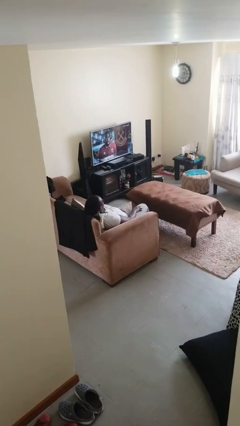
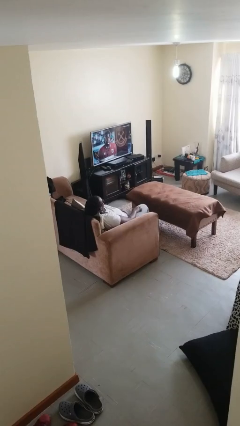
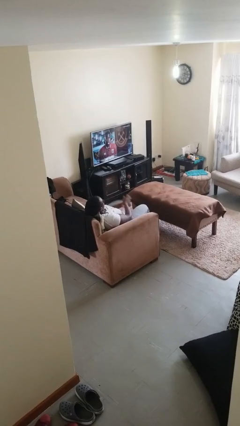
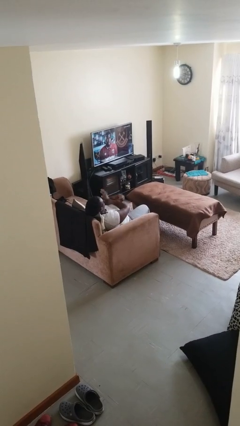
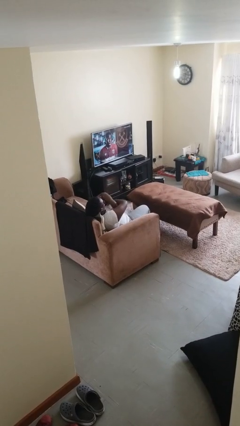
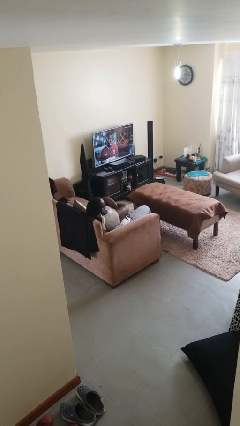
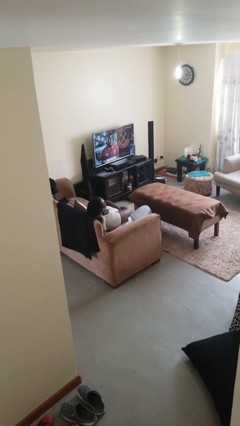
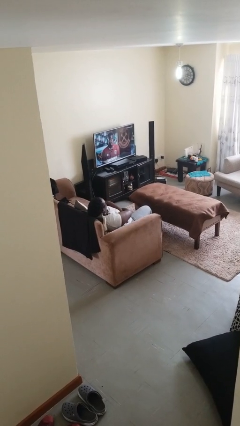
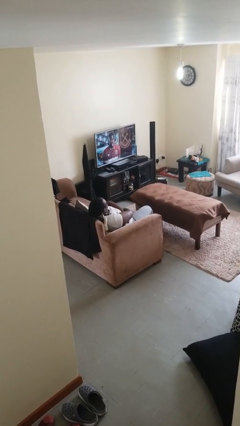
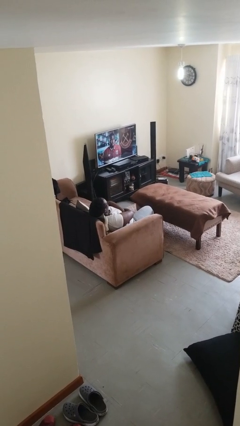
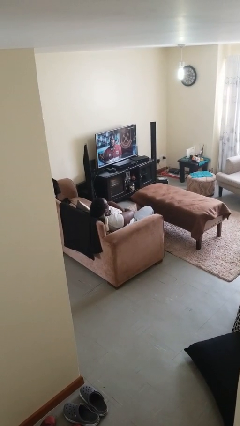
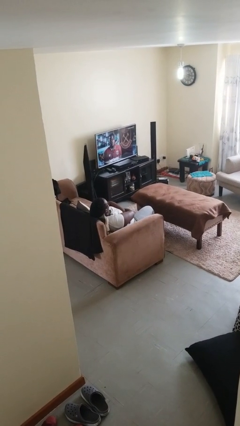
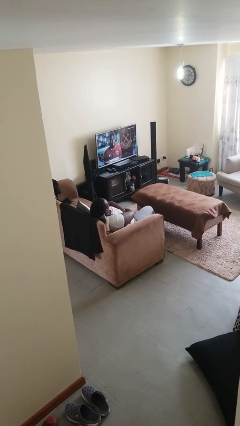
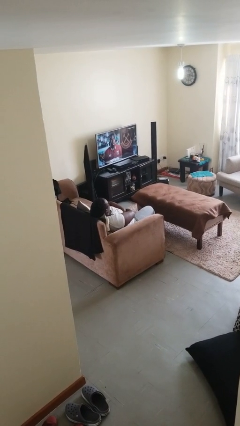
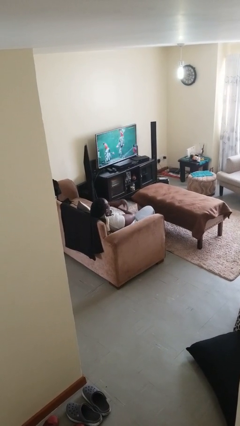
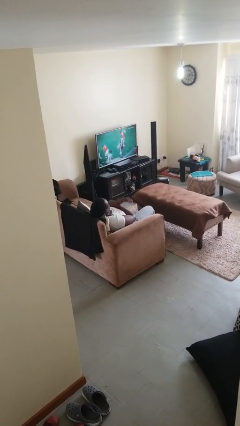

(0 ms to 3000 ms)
person crosses arms

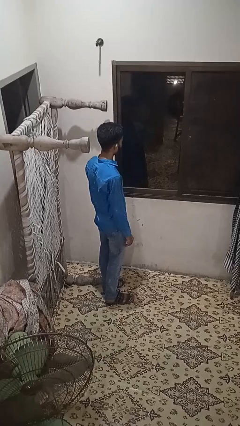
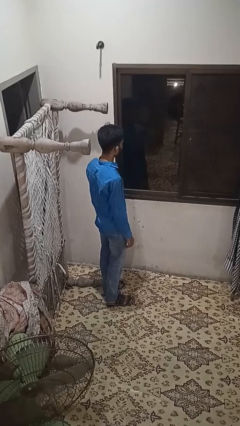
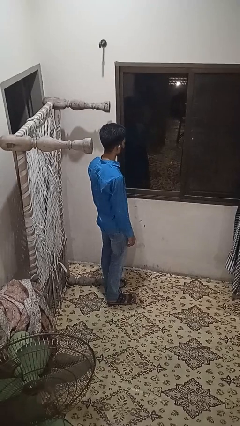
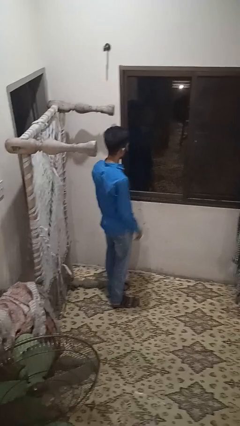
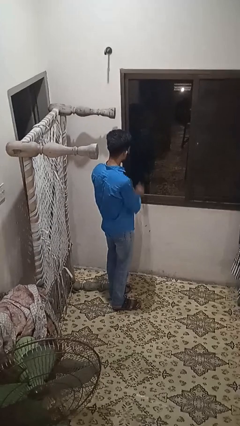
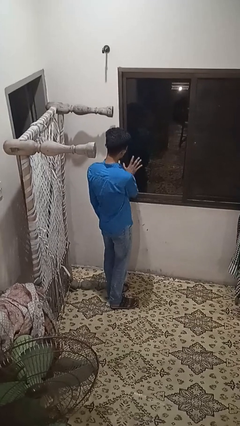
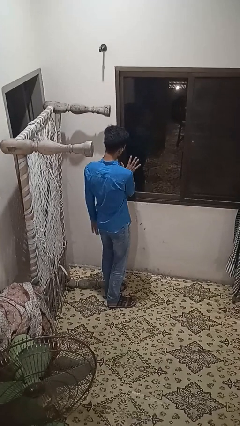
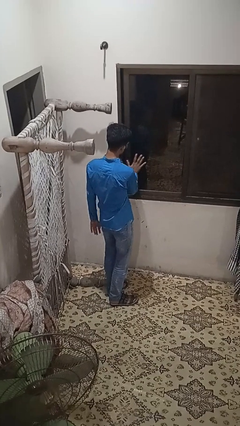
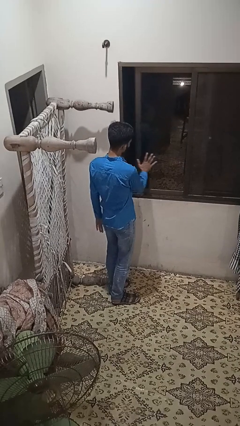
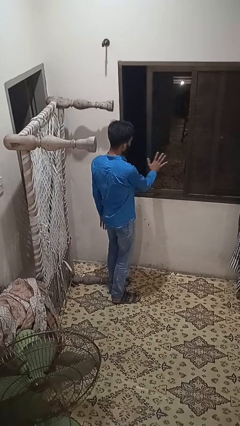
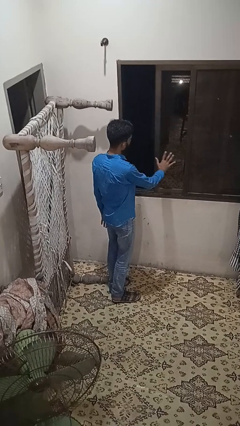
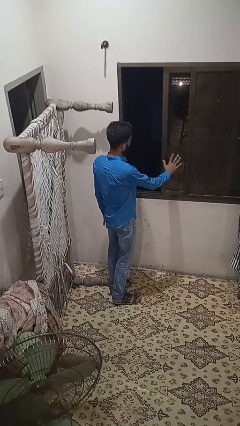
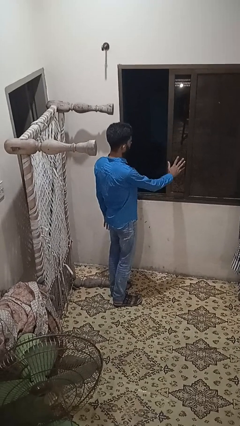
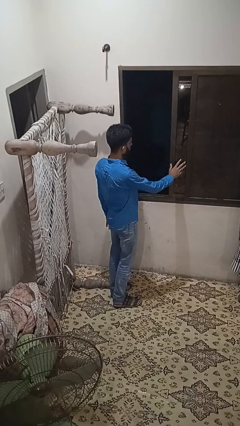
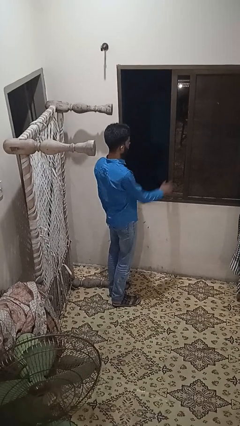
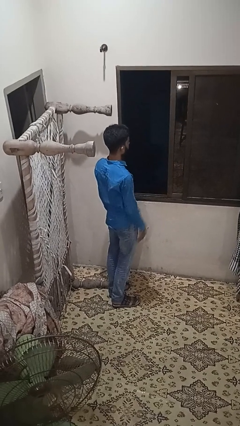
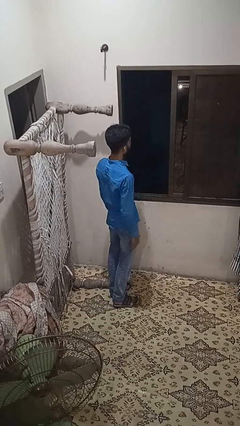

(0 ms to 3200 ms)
person opens home window

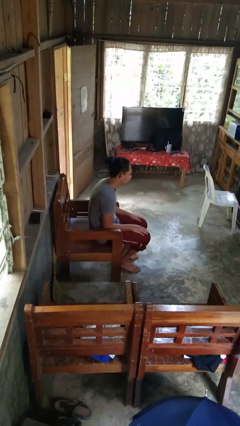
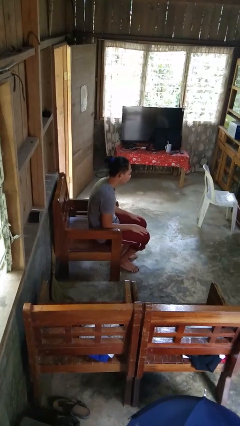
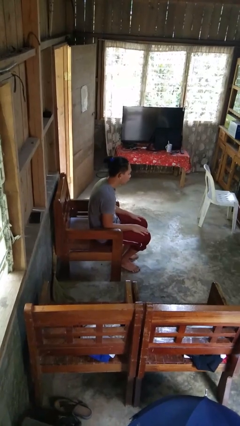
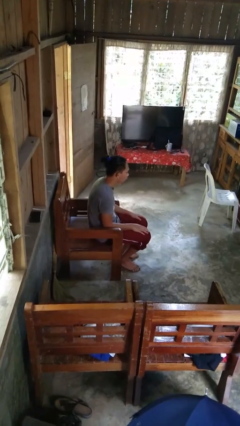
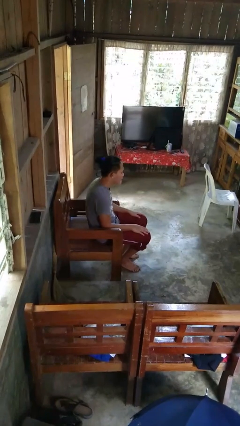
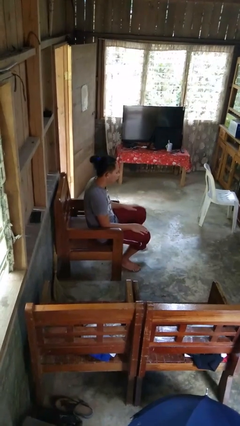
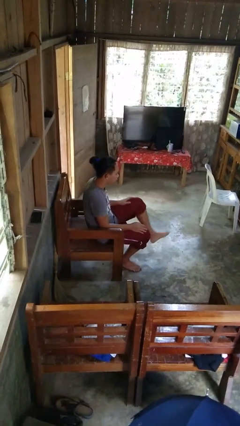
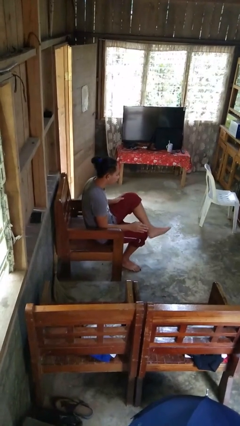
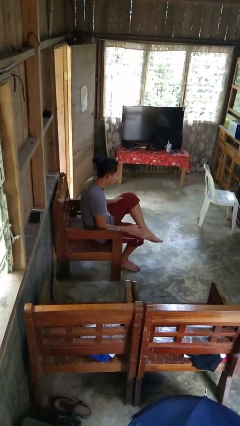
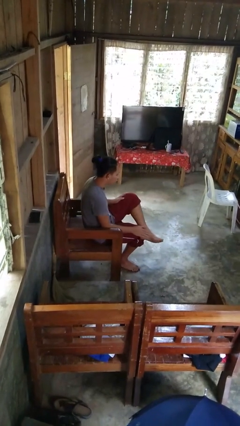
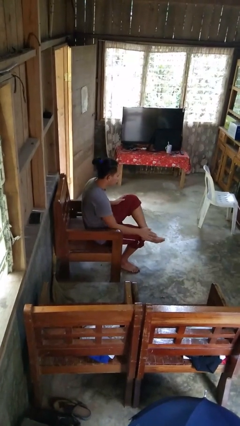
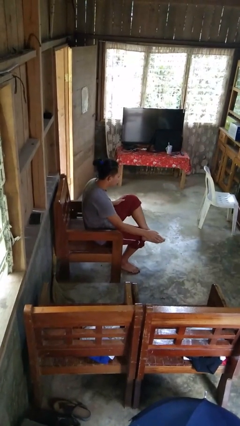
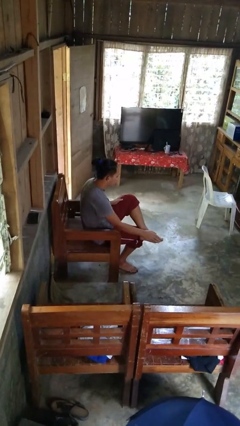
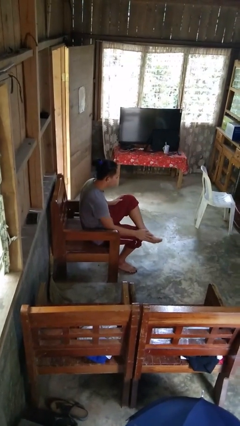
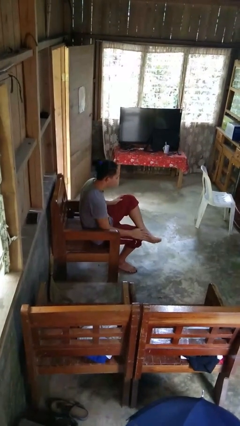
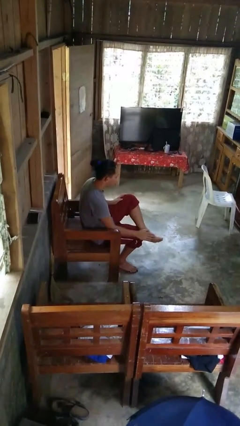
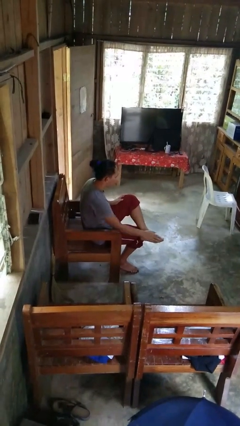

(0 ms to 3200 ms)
person rubs foot

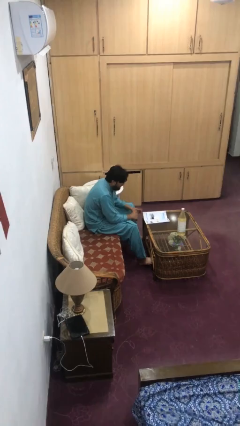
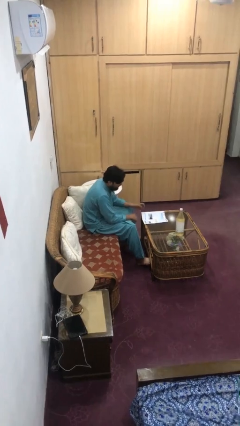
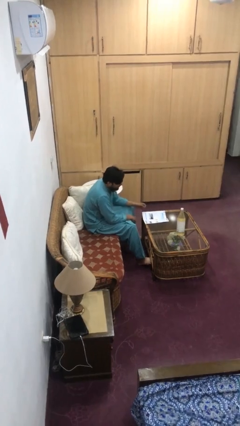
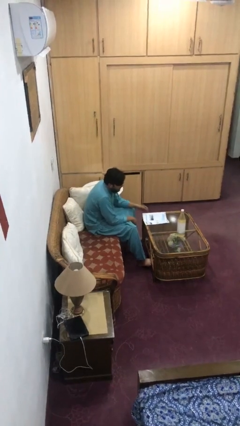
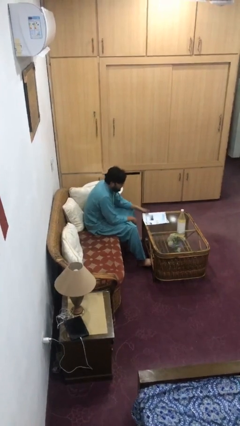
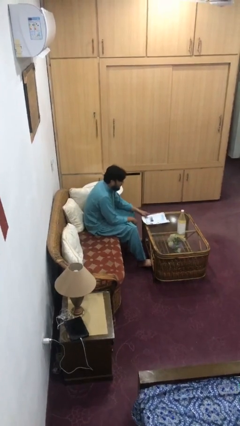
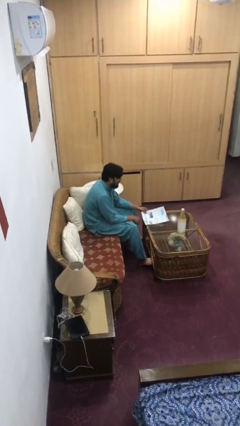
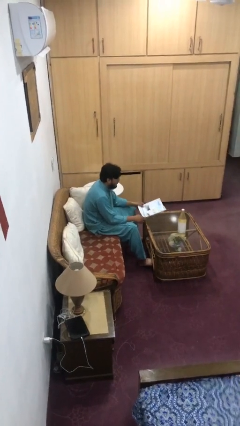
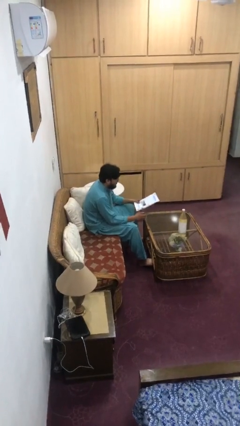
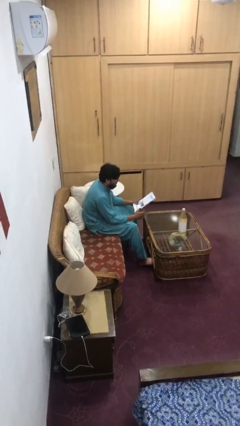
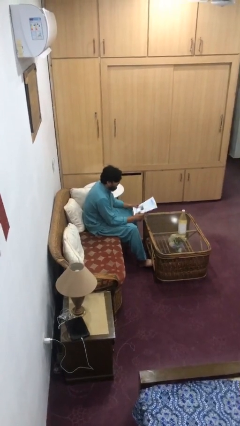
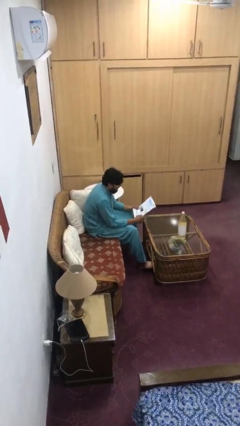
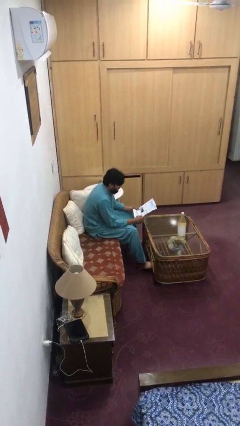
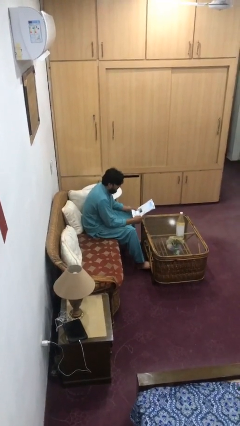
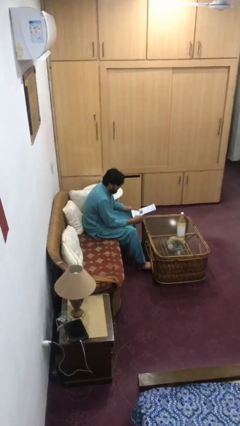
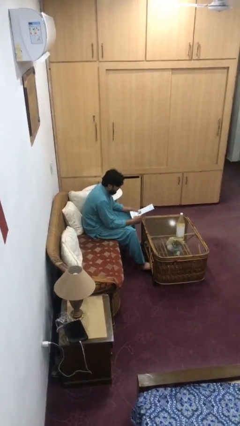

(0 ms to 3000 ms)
person picks up object from table

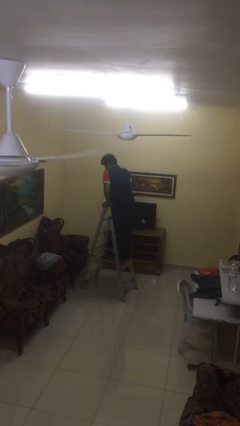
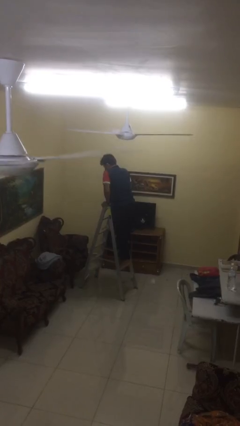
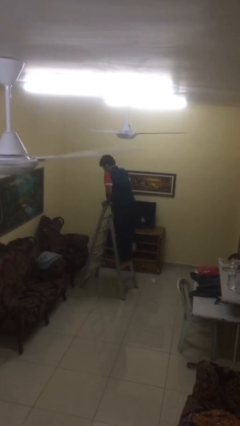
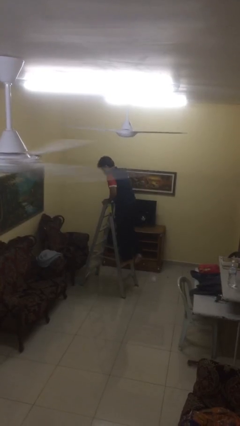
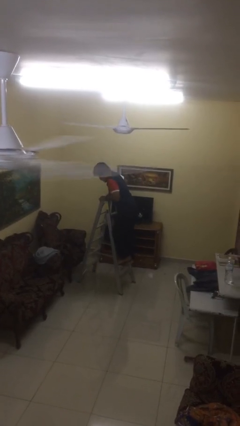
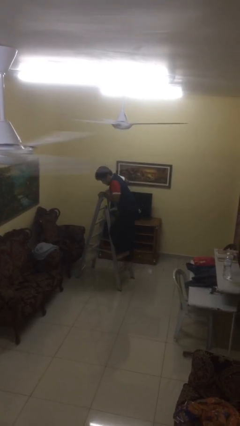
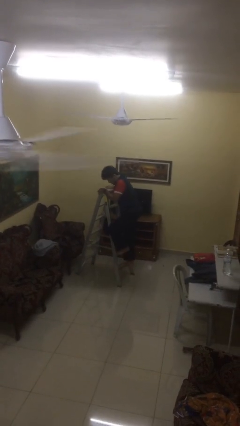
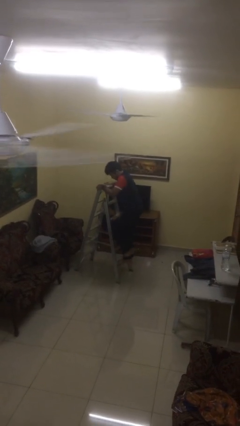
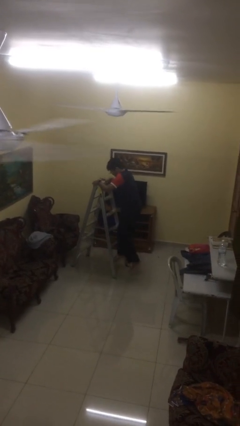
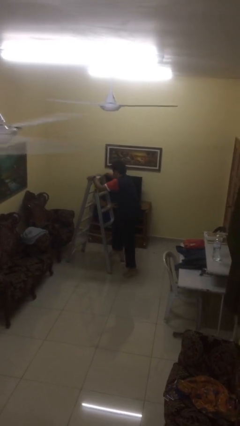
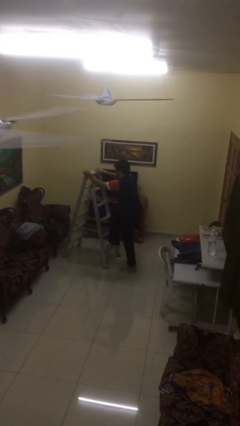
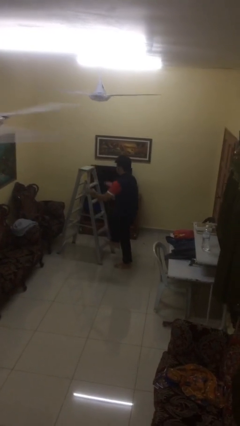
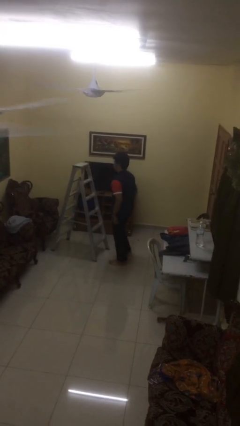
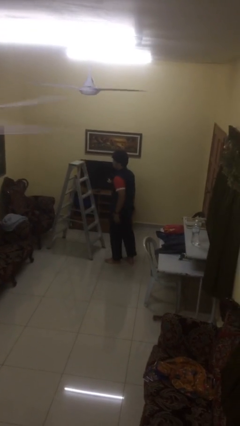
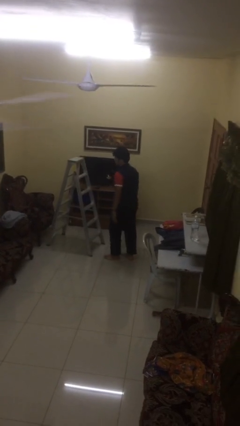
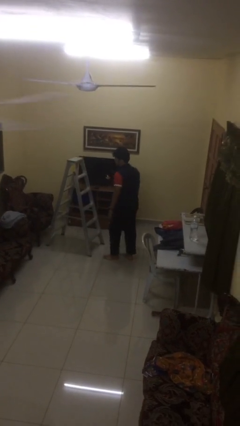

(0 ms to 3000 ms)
person climbs down ladder

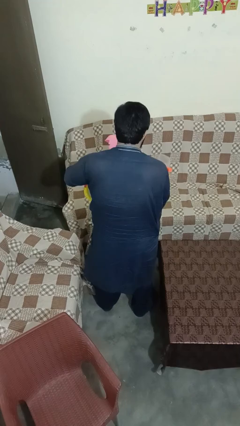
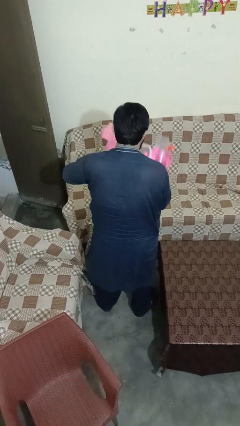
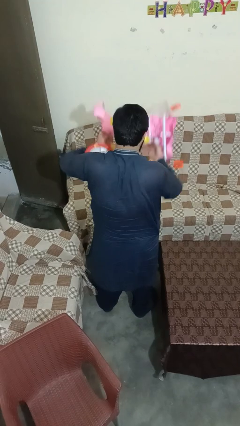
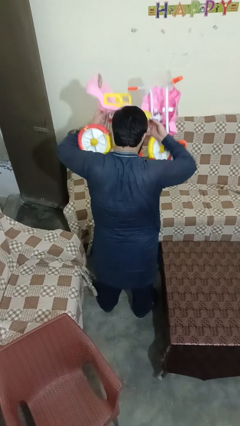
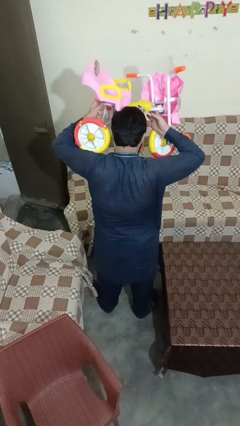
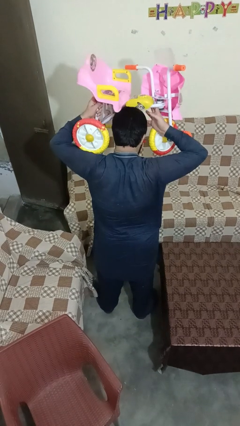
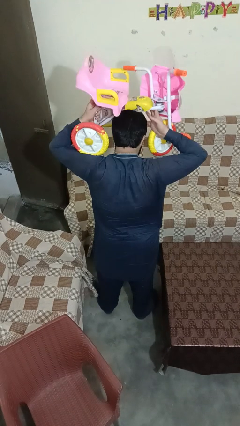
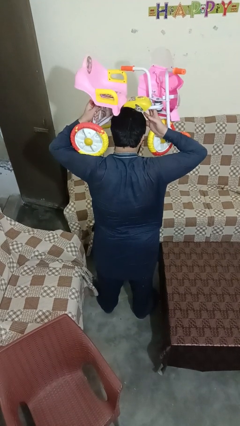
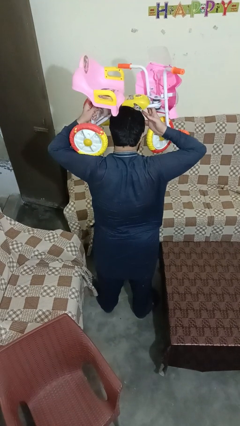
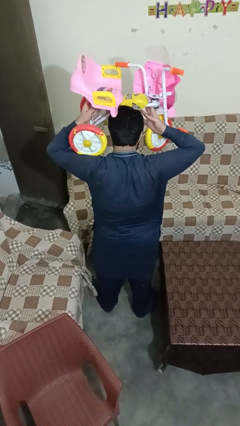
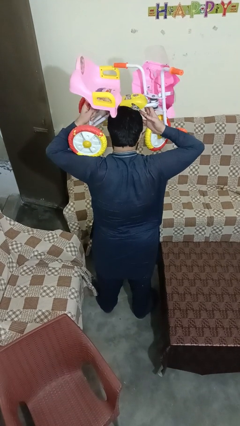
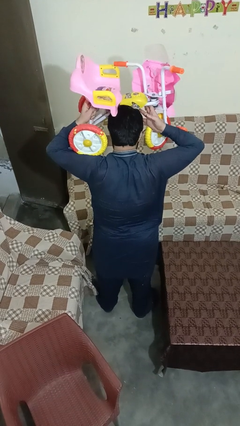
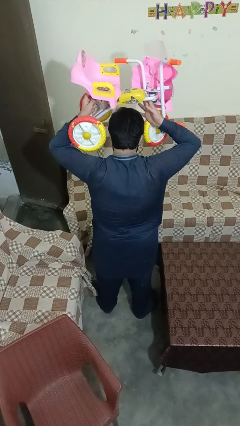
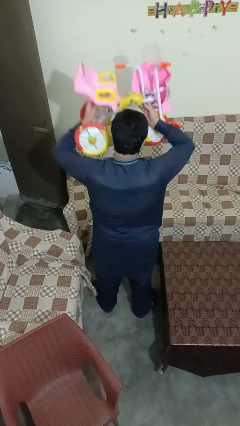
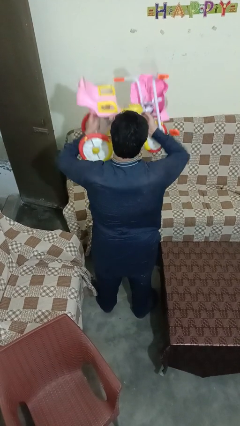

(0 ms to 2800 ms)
person holds object above head
